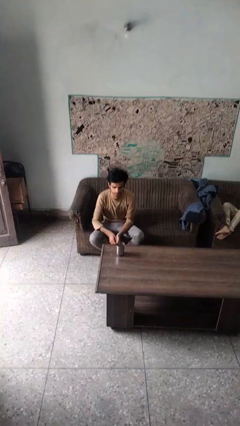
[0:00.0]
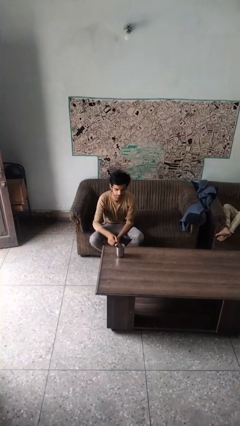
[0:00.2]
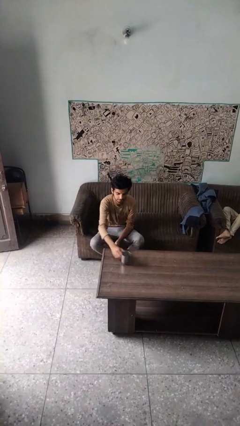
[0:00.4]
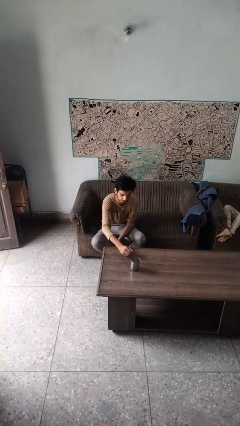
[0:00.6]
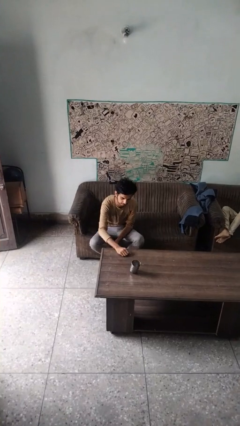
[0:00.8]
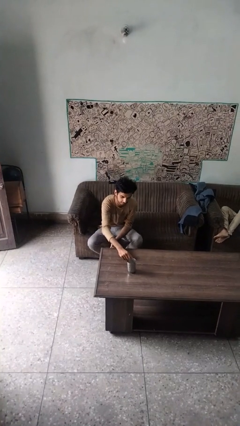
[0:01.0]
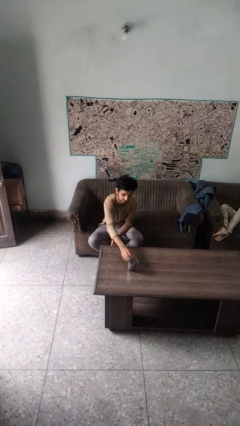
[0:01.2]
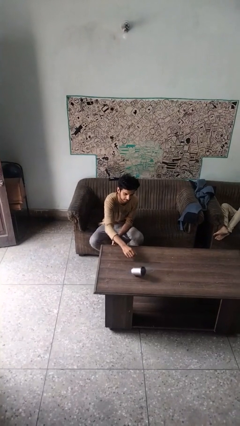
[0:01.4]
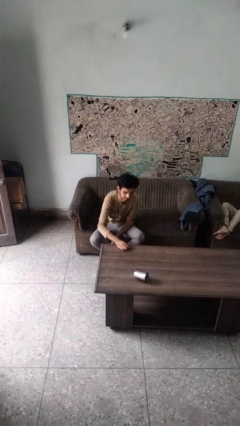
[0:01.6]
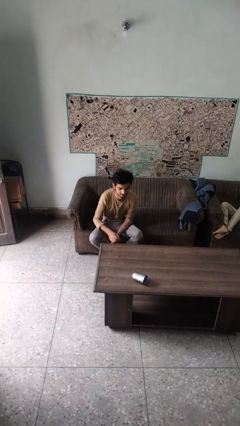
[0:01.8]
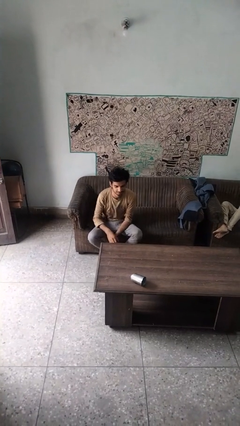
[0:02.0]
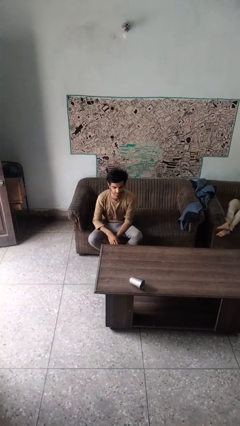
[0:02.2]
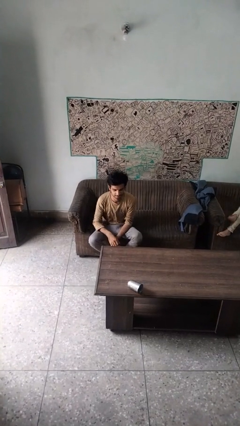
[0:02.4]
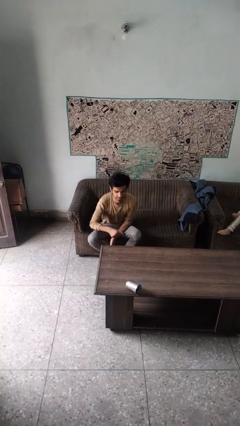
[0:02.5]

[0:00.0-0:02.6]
person knocks over glass

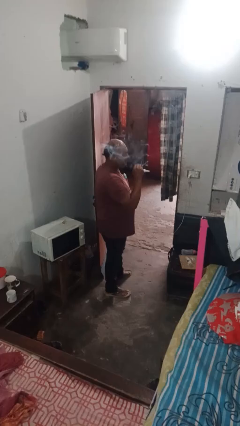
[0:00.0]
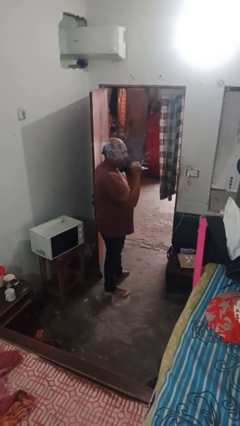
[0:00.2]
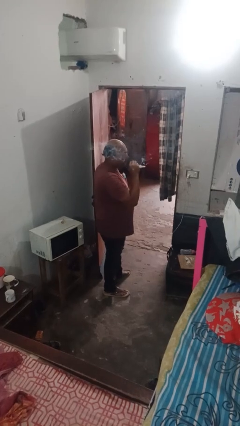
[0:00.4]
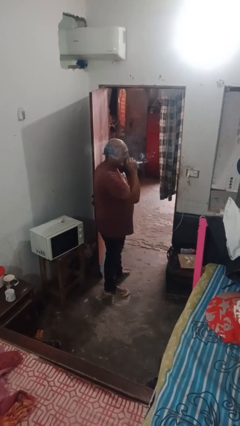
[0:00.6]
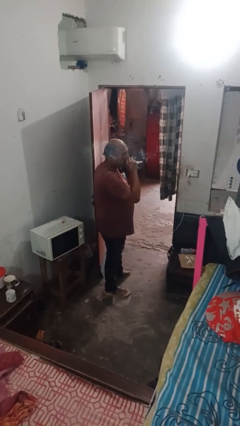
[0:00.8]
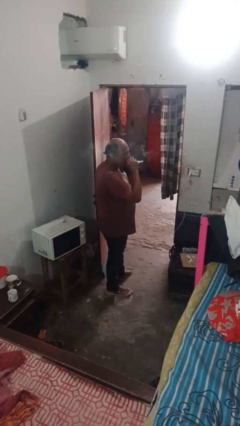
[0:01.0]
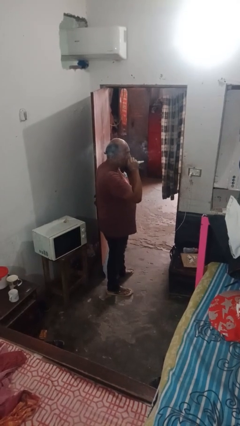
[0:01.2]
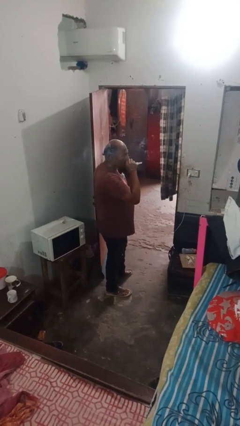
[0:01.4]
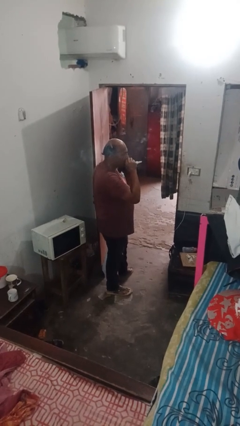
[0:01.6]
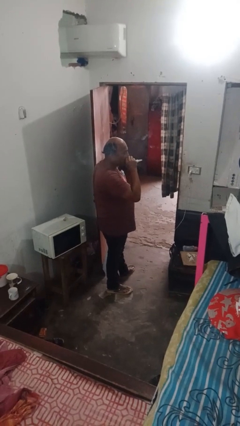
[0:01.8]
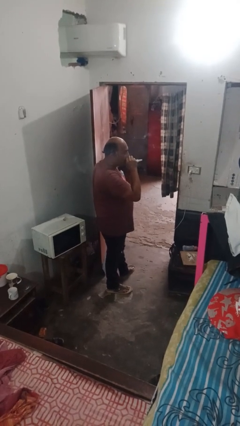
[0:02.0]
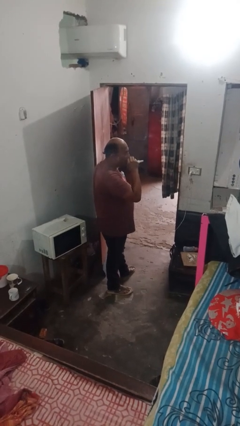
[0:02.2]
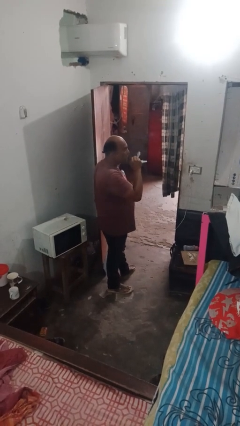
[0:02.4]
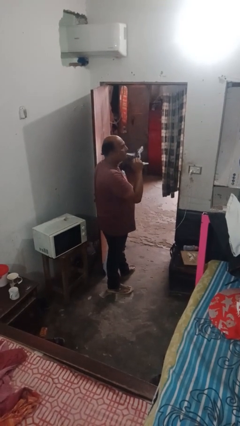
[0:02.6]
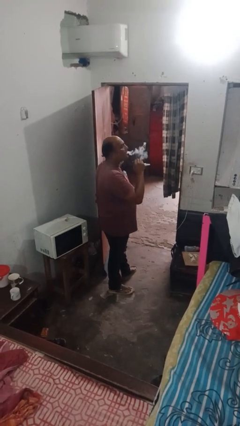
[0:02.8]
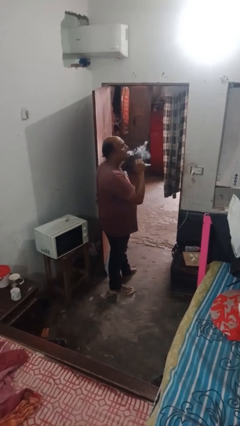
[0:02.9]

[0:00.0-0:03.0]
person vapes

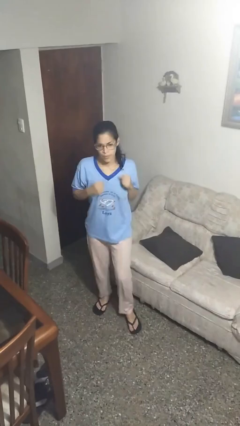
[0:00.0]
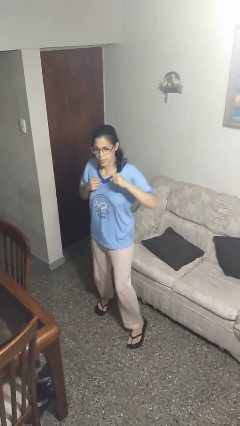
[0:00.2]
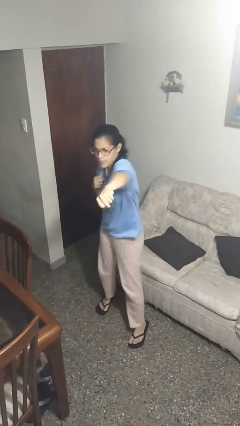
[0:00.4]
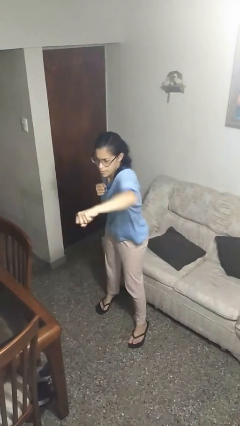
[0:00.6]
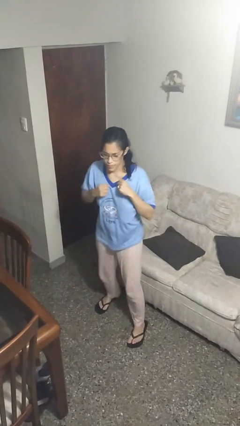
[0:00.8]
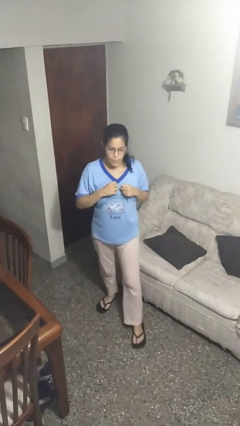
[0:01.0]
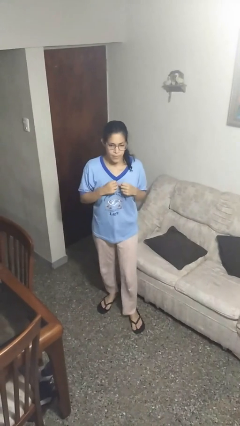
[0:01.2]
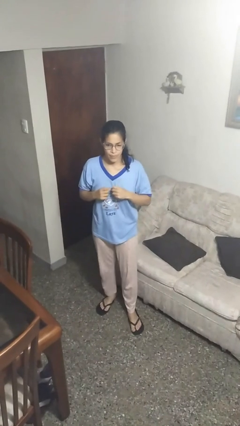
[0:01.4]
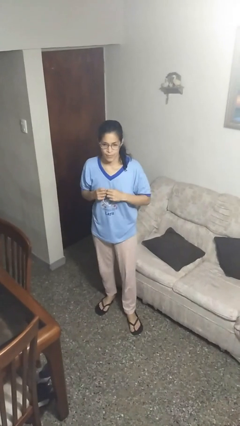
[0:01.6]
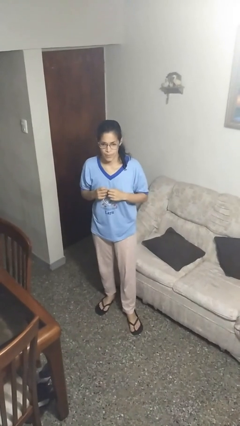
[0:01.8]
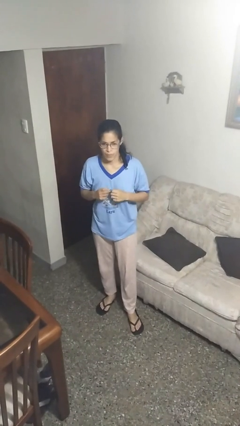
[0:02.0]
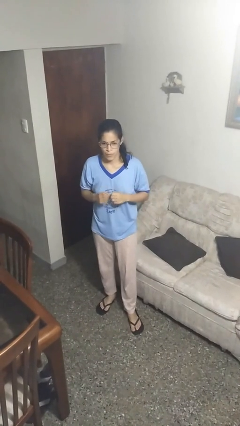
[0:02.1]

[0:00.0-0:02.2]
person karate chop

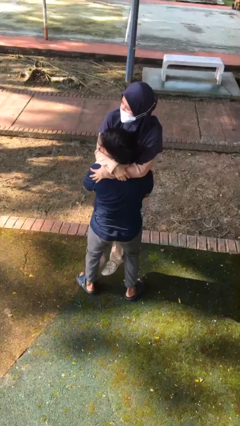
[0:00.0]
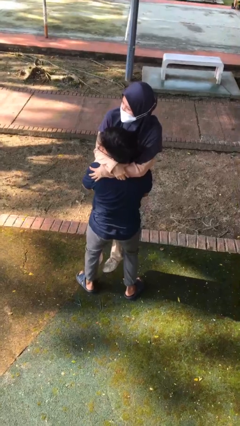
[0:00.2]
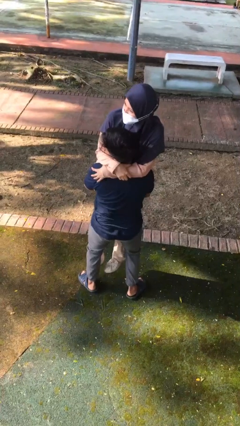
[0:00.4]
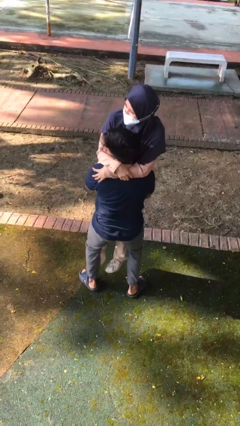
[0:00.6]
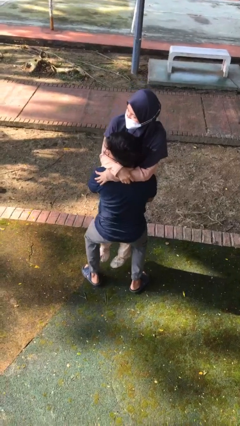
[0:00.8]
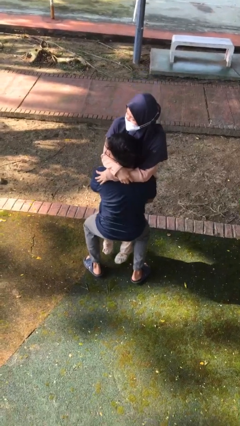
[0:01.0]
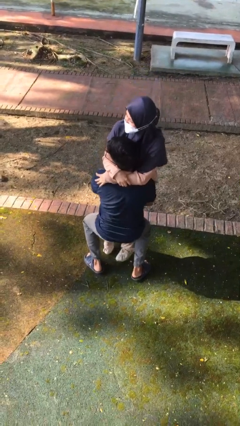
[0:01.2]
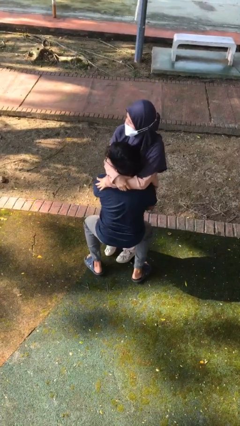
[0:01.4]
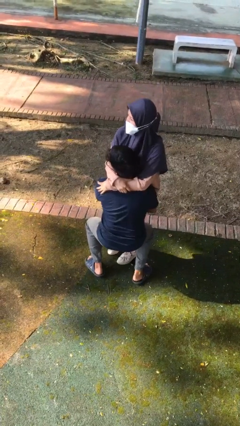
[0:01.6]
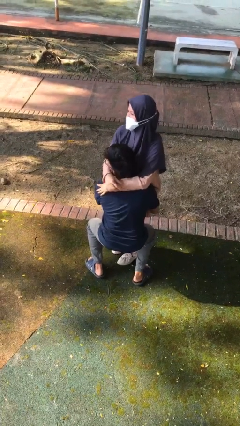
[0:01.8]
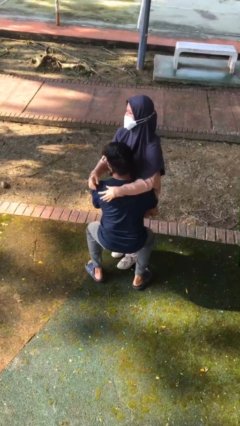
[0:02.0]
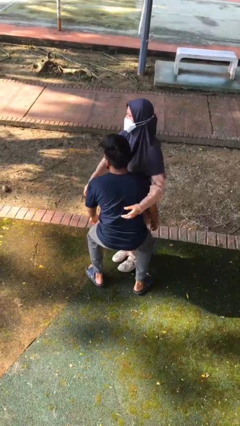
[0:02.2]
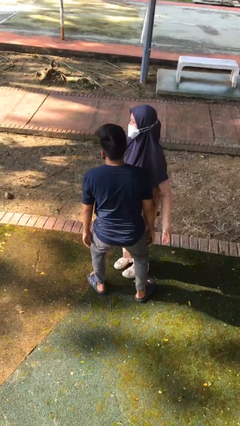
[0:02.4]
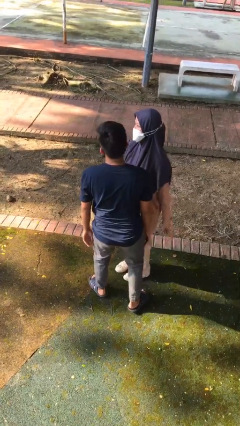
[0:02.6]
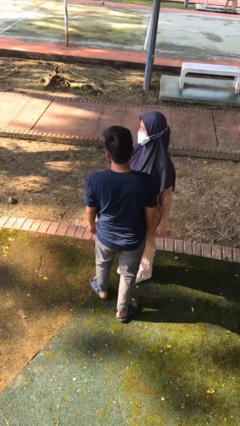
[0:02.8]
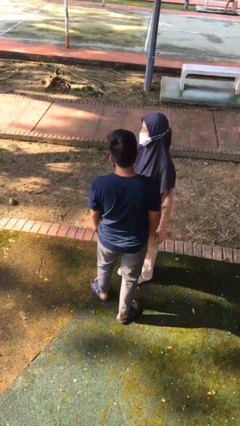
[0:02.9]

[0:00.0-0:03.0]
person puts down person

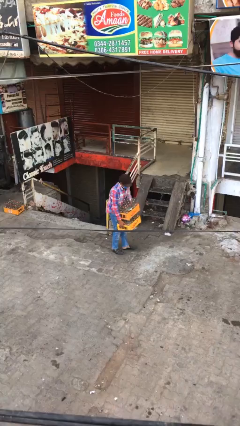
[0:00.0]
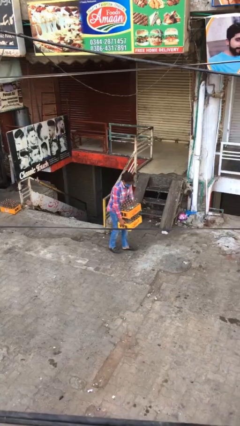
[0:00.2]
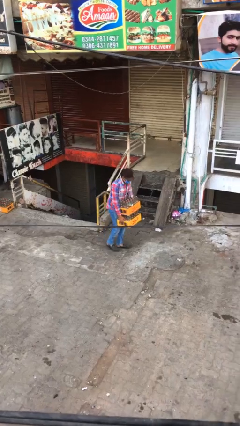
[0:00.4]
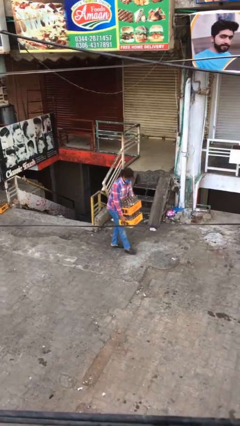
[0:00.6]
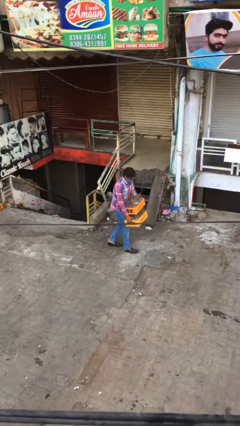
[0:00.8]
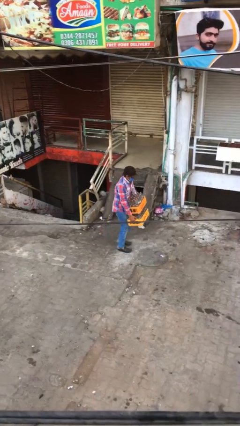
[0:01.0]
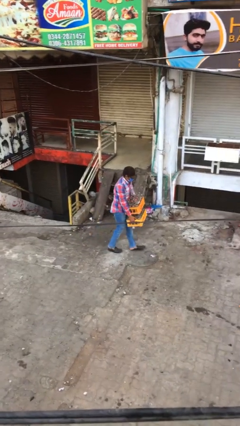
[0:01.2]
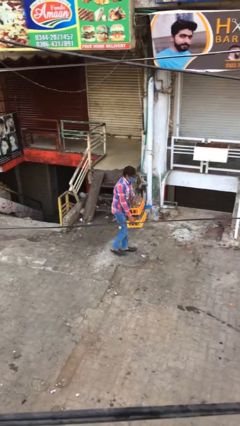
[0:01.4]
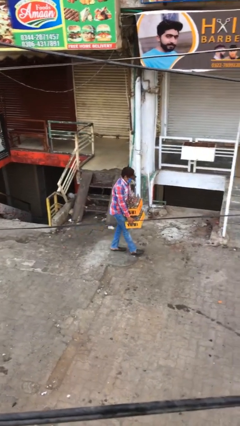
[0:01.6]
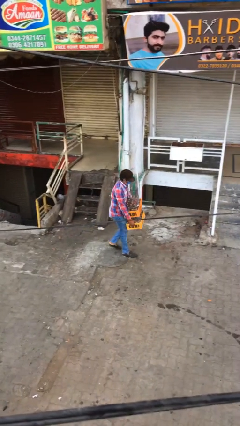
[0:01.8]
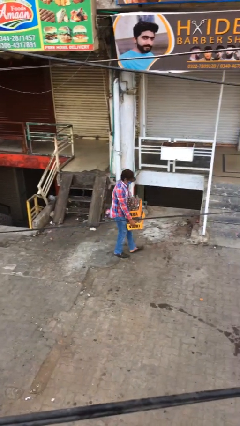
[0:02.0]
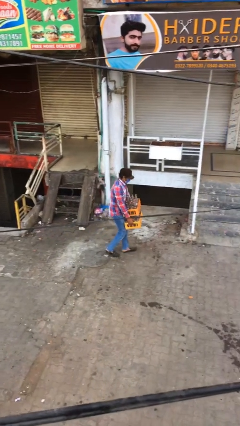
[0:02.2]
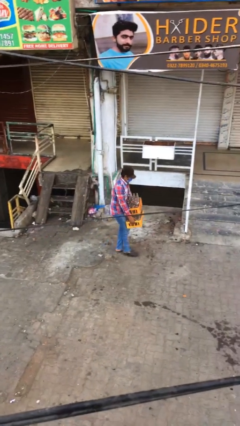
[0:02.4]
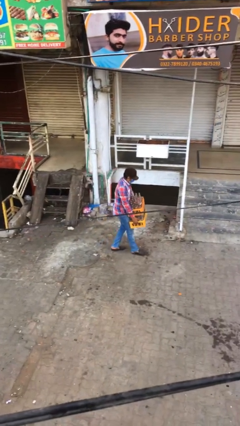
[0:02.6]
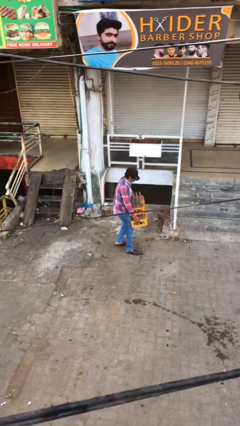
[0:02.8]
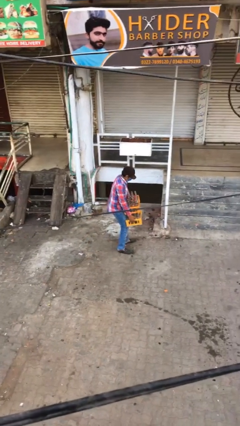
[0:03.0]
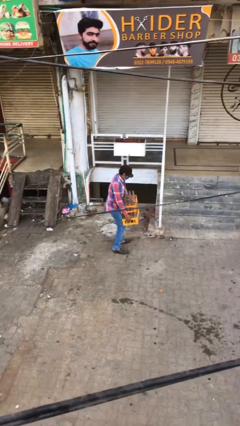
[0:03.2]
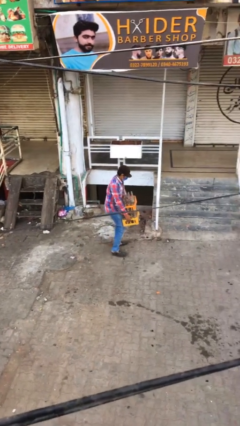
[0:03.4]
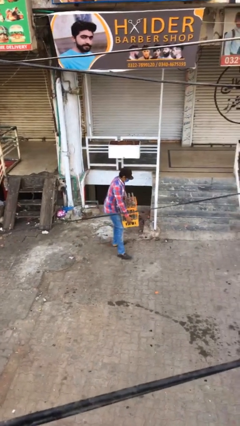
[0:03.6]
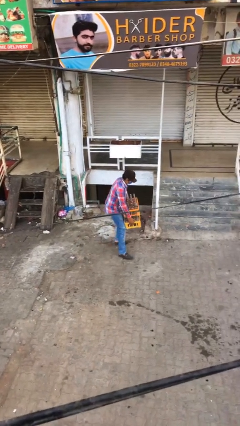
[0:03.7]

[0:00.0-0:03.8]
person carries heavy object

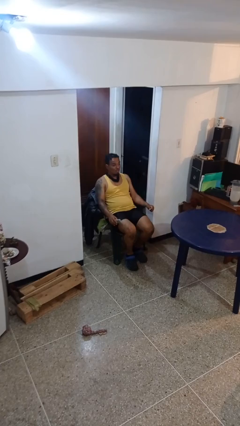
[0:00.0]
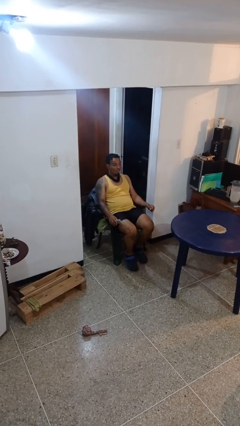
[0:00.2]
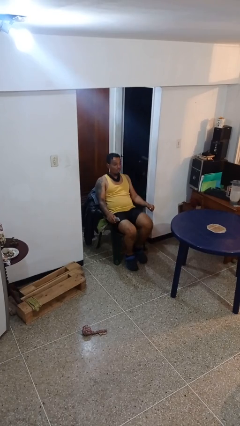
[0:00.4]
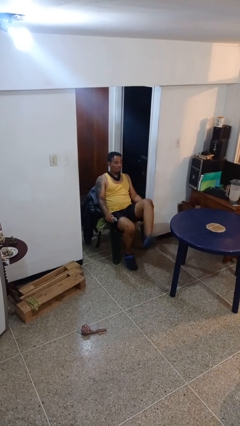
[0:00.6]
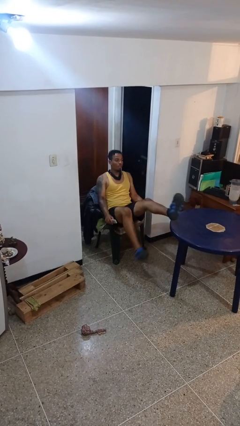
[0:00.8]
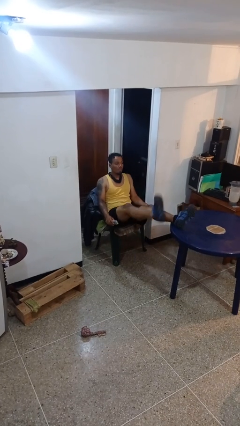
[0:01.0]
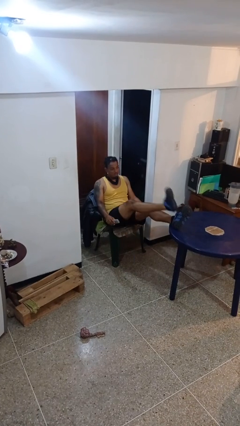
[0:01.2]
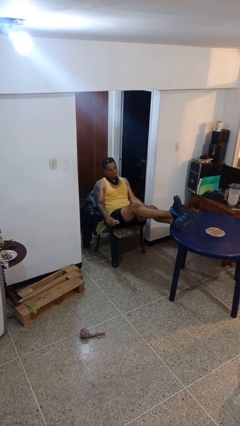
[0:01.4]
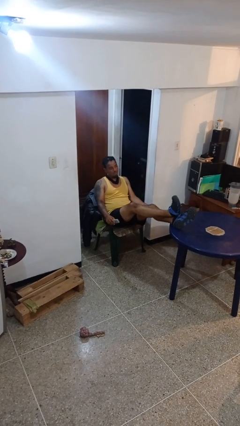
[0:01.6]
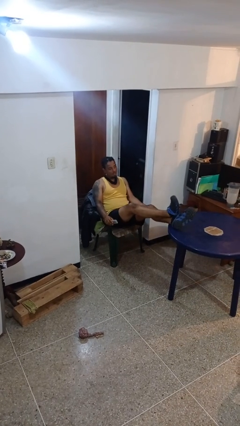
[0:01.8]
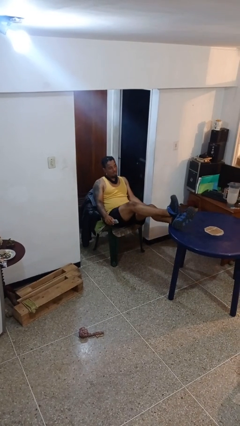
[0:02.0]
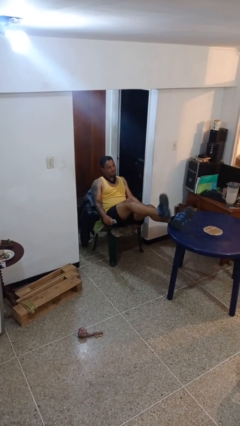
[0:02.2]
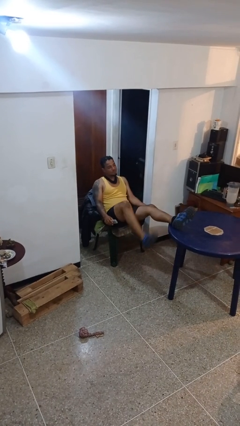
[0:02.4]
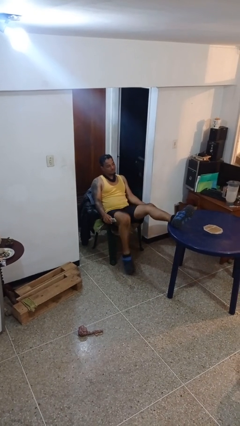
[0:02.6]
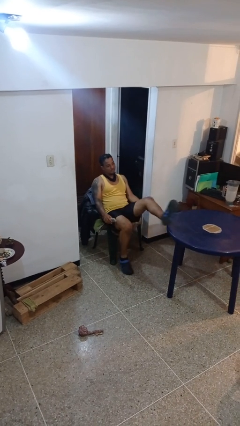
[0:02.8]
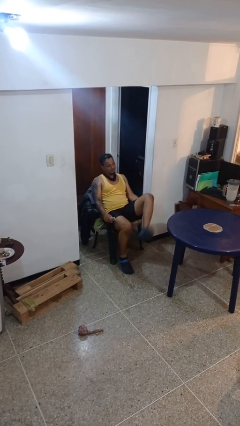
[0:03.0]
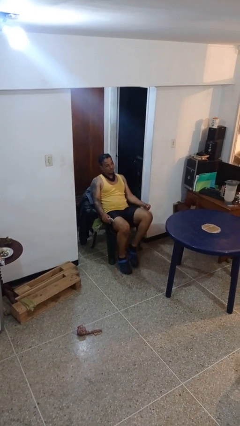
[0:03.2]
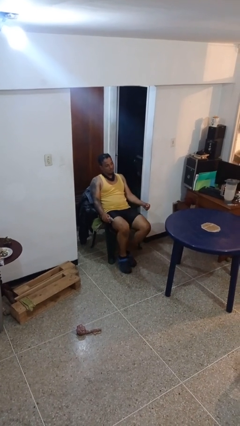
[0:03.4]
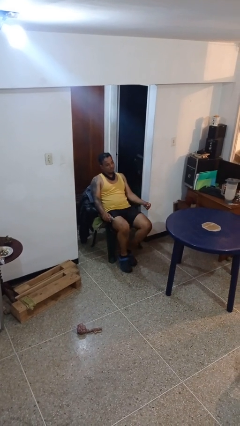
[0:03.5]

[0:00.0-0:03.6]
person puts feet up
